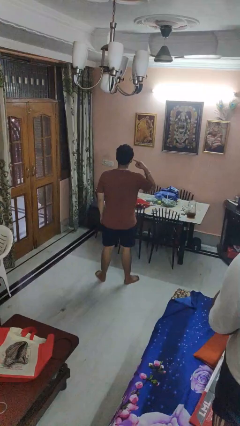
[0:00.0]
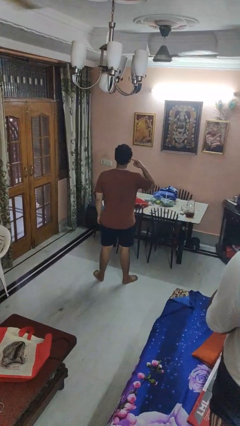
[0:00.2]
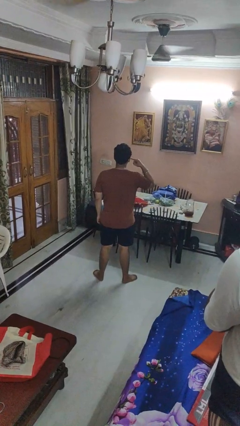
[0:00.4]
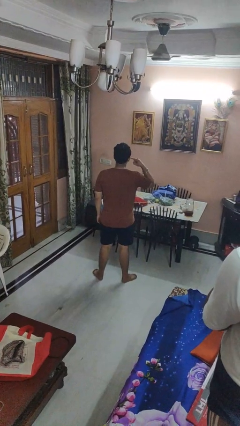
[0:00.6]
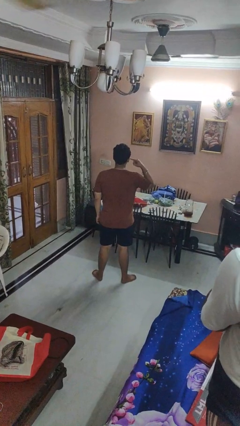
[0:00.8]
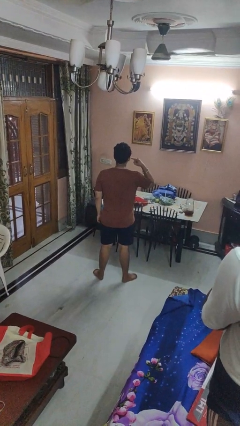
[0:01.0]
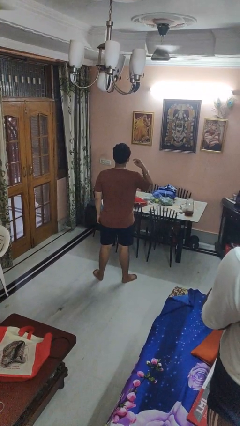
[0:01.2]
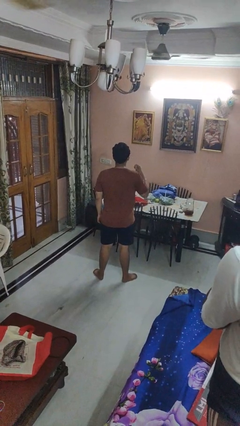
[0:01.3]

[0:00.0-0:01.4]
person gestures listen closely

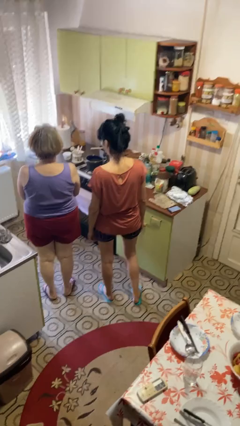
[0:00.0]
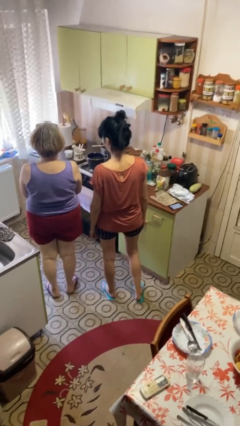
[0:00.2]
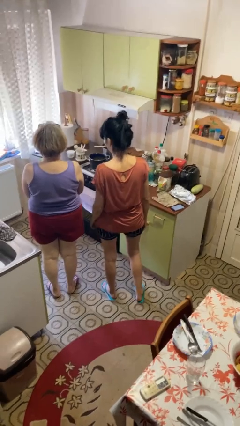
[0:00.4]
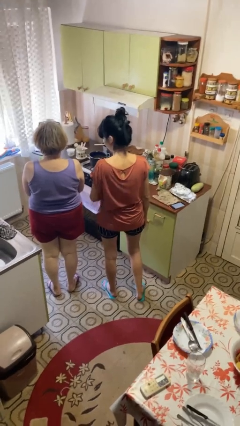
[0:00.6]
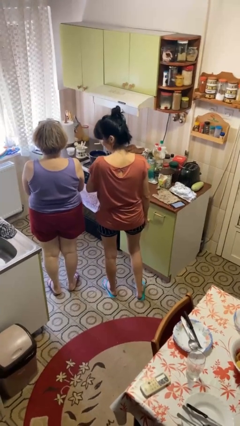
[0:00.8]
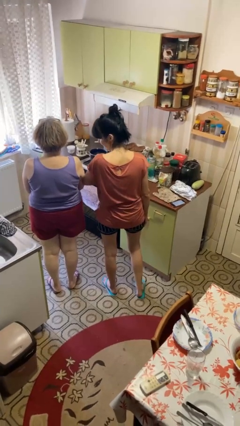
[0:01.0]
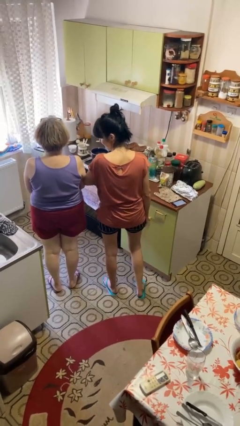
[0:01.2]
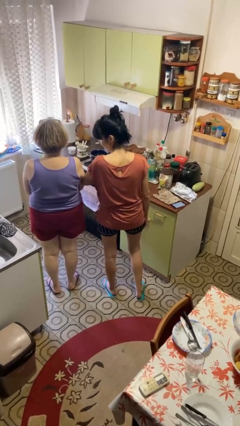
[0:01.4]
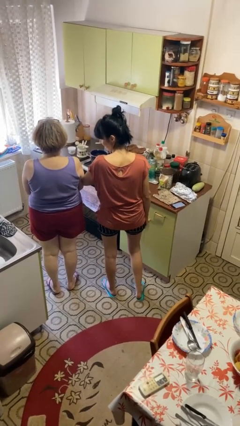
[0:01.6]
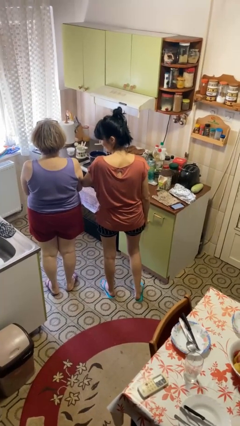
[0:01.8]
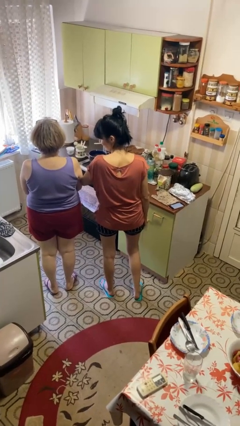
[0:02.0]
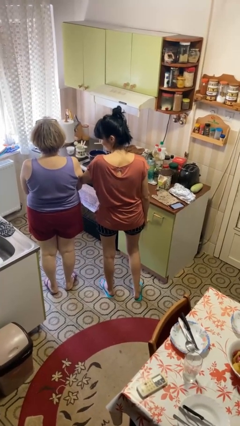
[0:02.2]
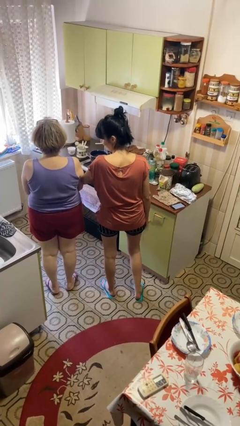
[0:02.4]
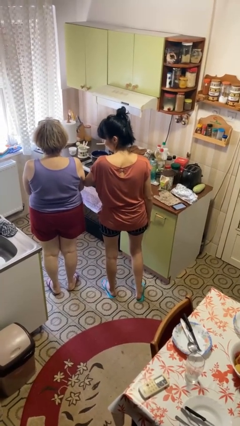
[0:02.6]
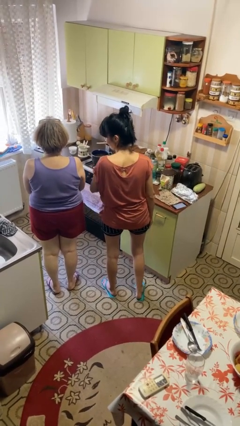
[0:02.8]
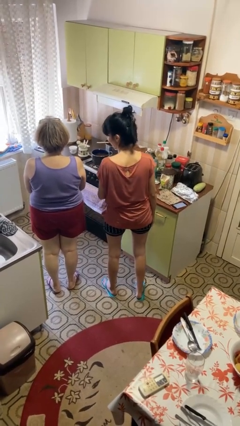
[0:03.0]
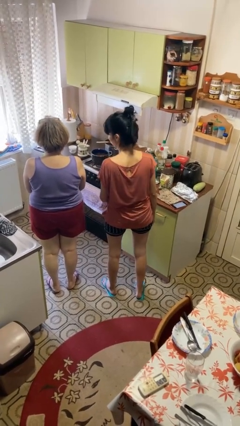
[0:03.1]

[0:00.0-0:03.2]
person nudges person with elbow

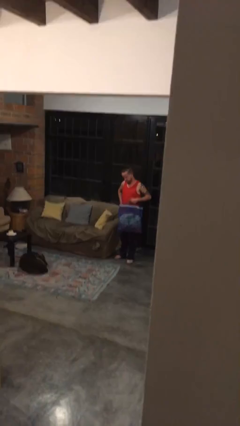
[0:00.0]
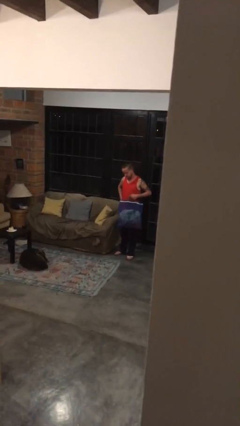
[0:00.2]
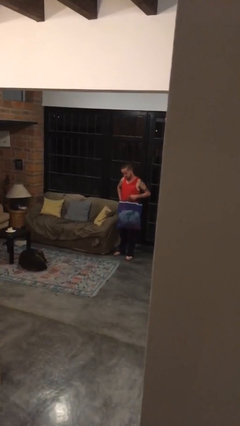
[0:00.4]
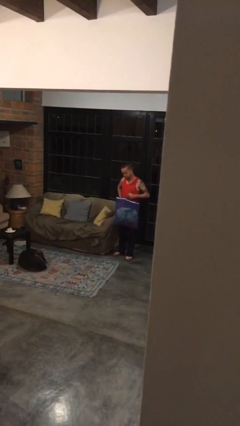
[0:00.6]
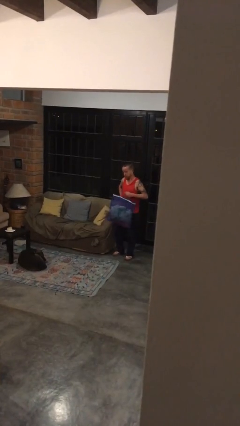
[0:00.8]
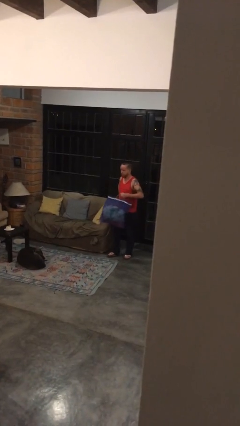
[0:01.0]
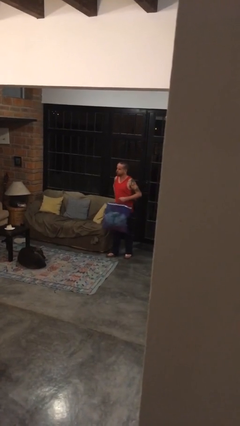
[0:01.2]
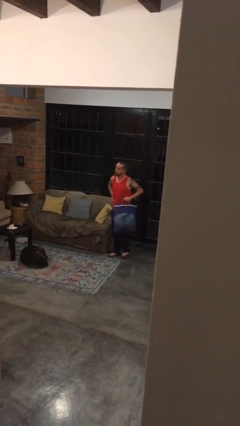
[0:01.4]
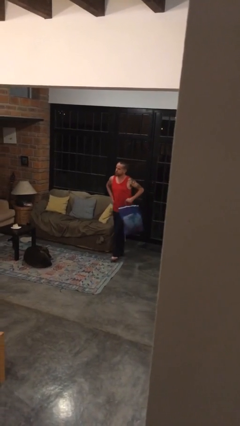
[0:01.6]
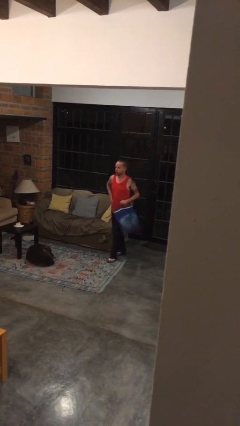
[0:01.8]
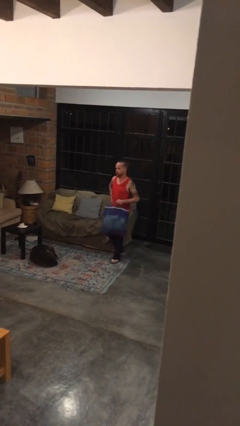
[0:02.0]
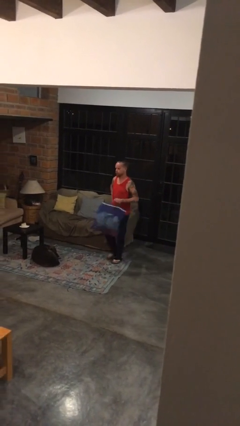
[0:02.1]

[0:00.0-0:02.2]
person carries groceries

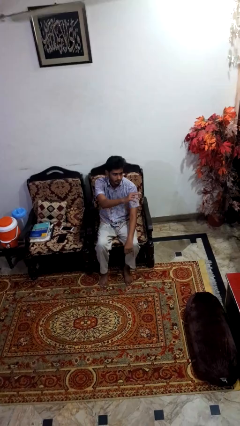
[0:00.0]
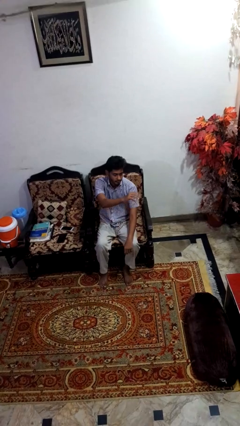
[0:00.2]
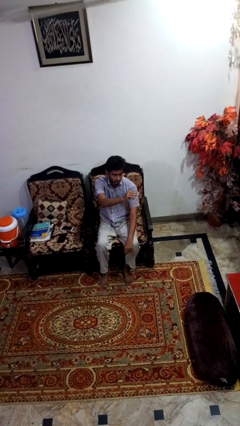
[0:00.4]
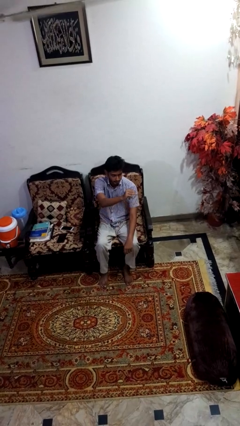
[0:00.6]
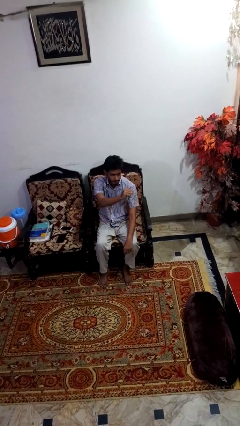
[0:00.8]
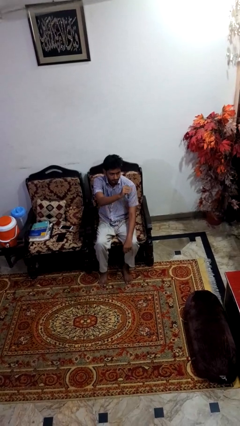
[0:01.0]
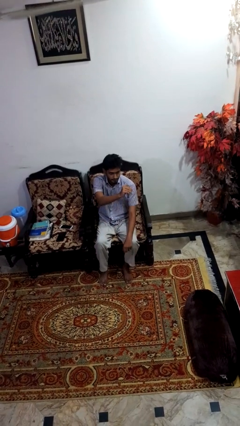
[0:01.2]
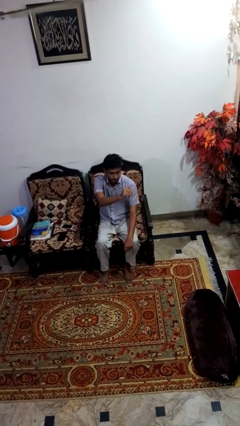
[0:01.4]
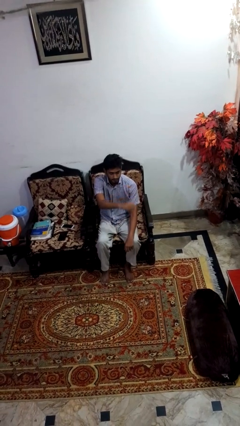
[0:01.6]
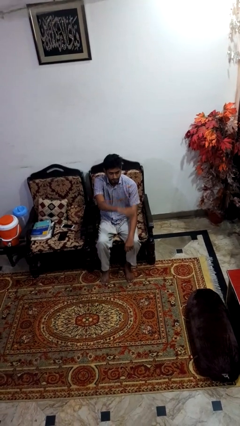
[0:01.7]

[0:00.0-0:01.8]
person gestures come here

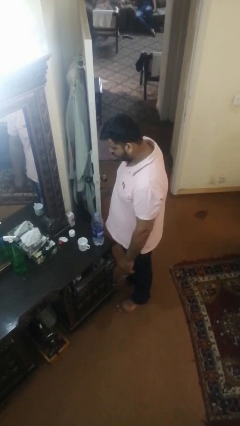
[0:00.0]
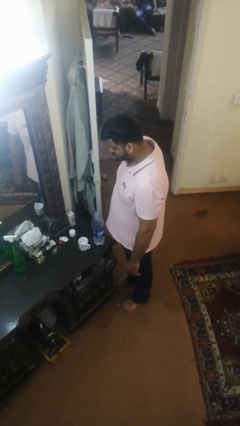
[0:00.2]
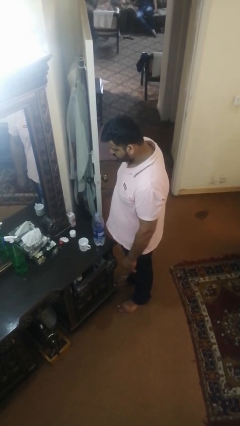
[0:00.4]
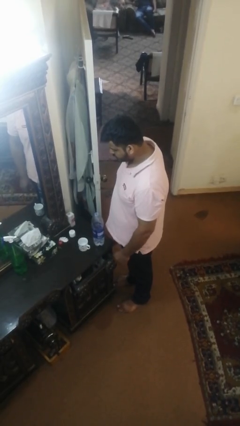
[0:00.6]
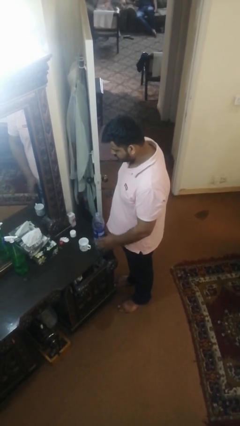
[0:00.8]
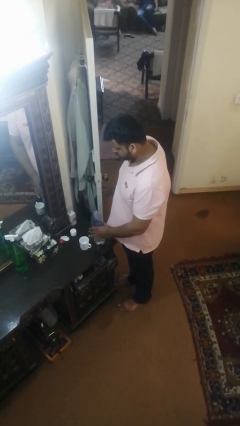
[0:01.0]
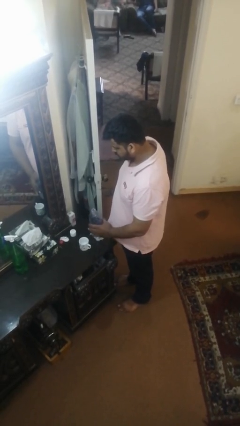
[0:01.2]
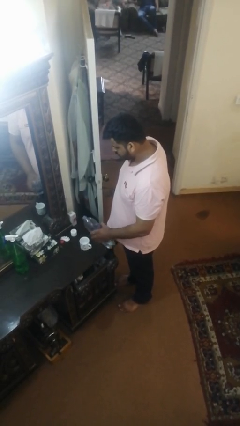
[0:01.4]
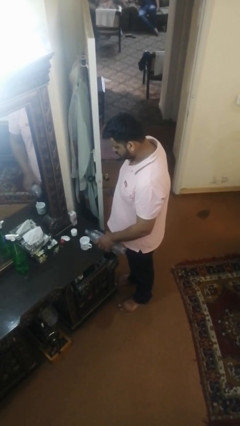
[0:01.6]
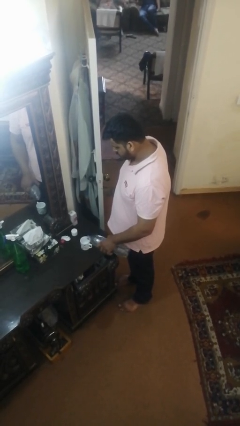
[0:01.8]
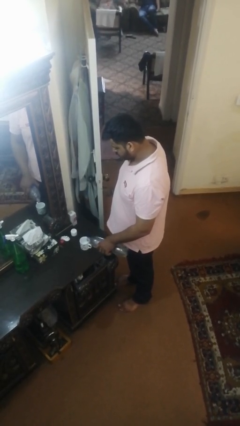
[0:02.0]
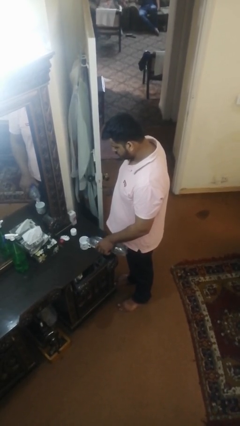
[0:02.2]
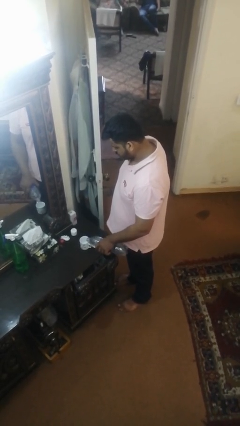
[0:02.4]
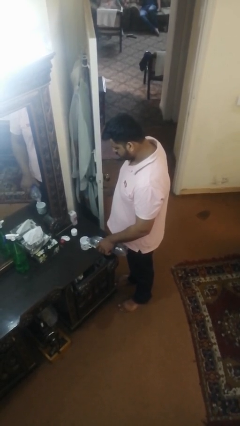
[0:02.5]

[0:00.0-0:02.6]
person pours liquid into cup

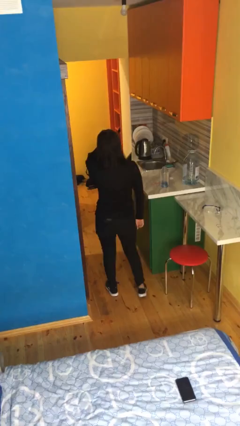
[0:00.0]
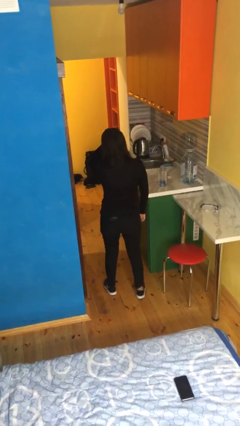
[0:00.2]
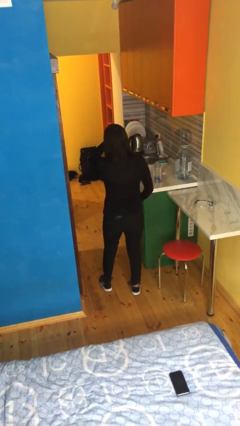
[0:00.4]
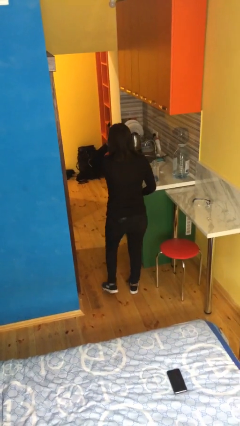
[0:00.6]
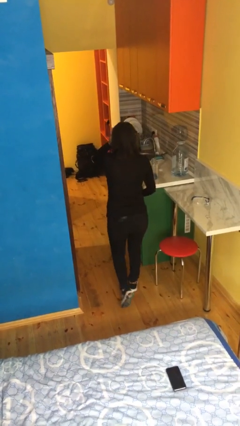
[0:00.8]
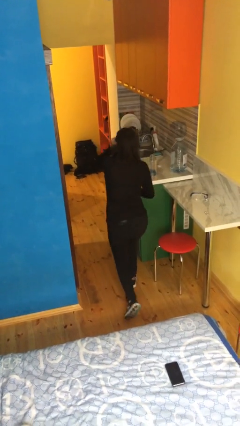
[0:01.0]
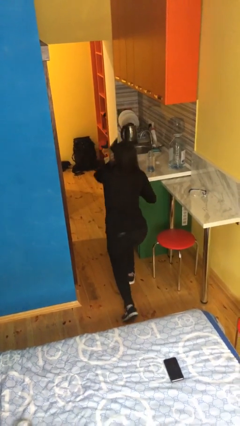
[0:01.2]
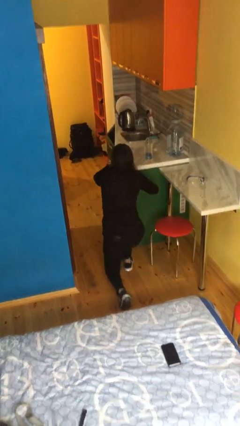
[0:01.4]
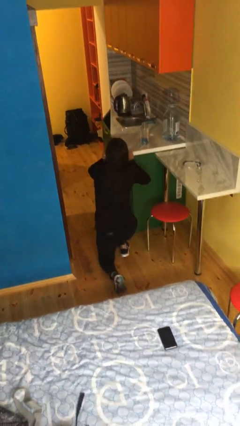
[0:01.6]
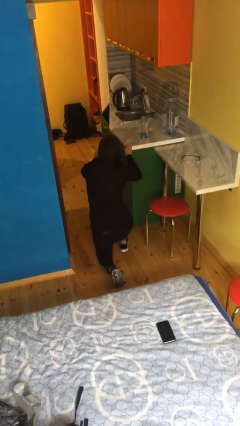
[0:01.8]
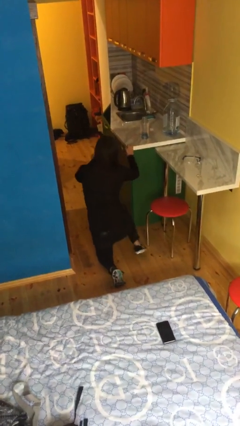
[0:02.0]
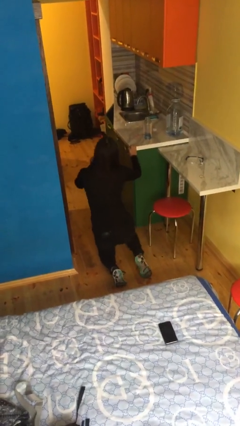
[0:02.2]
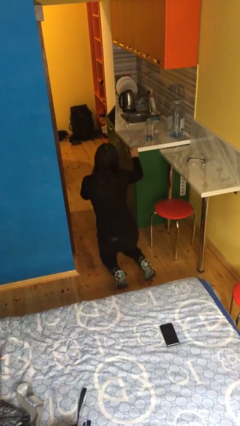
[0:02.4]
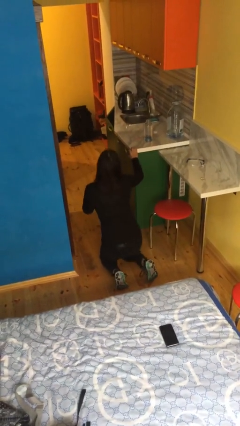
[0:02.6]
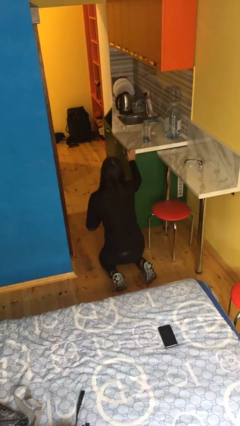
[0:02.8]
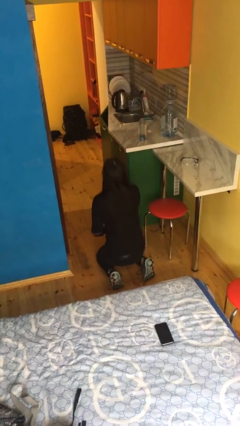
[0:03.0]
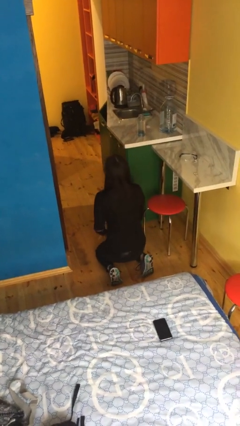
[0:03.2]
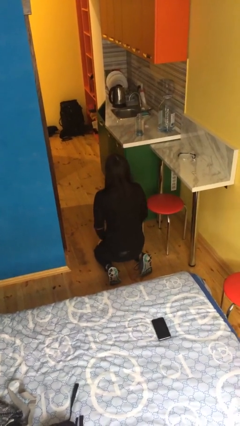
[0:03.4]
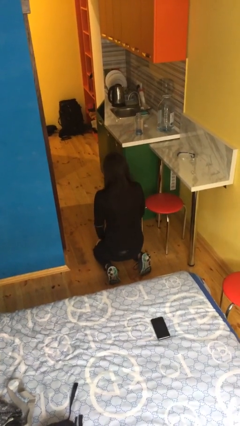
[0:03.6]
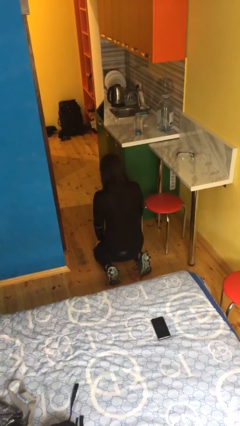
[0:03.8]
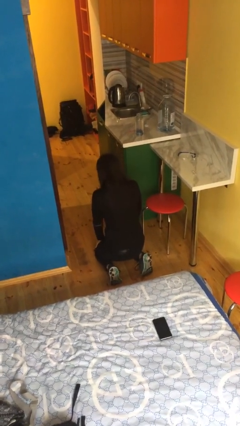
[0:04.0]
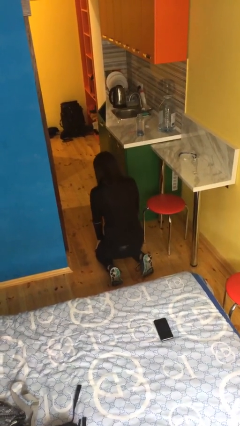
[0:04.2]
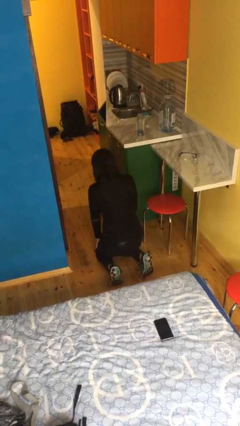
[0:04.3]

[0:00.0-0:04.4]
person kneels

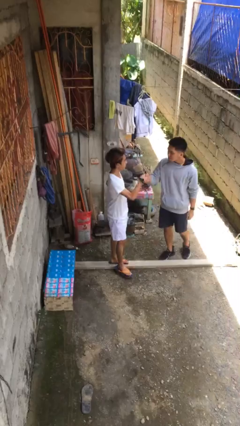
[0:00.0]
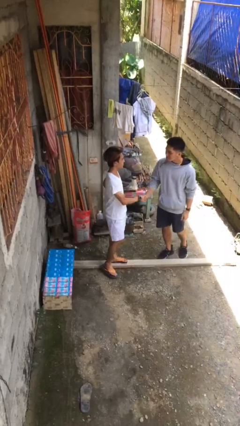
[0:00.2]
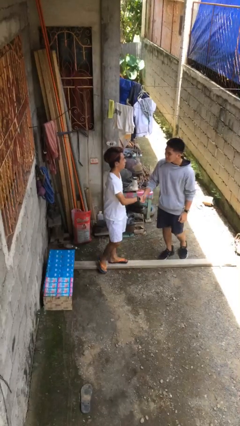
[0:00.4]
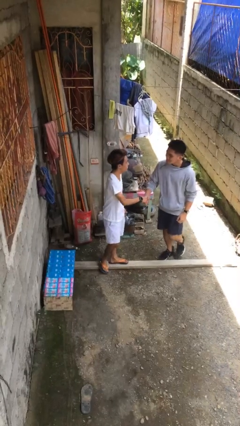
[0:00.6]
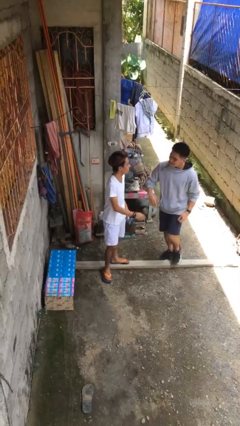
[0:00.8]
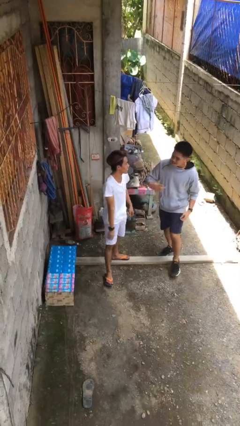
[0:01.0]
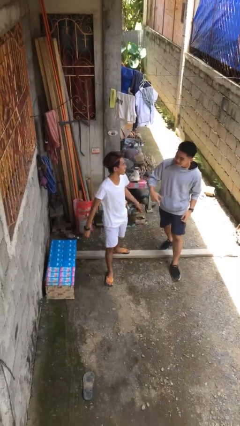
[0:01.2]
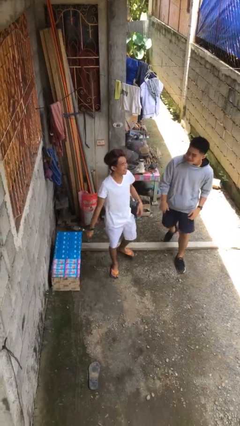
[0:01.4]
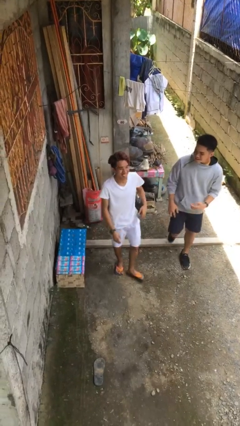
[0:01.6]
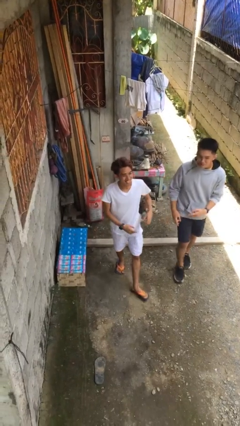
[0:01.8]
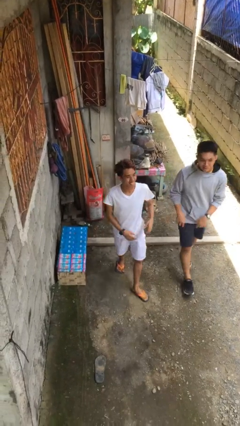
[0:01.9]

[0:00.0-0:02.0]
person shakes hand
